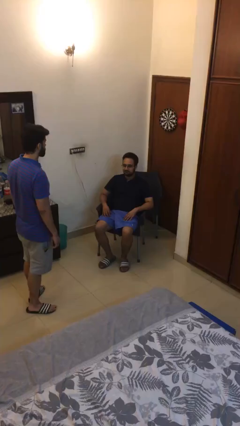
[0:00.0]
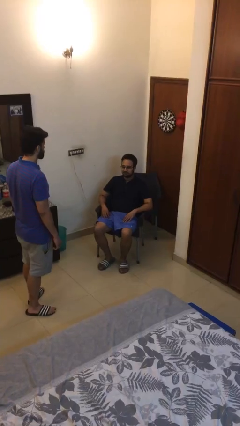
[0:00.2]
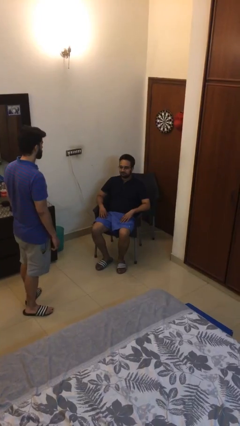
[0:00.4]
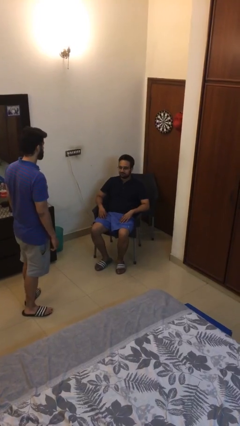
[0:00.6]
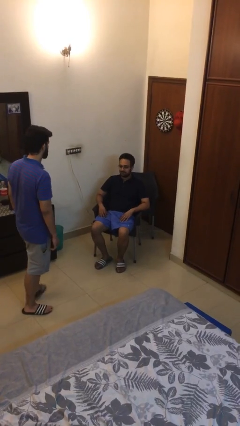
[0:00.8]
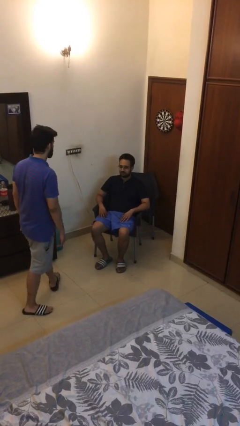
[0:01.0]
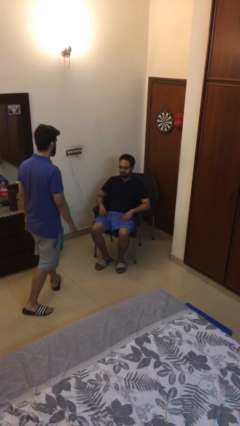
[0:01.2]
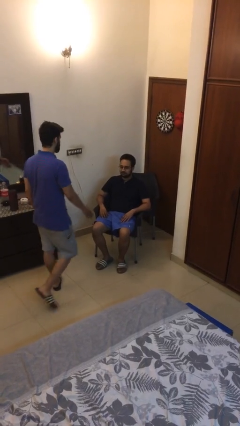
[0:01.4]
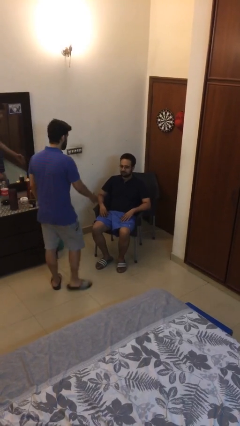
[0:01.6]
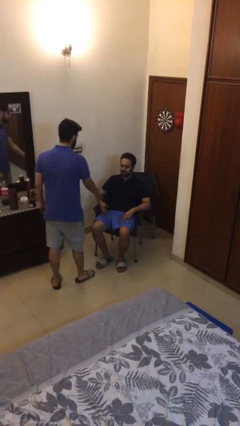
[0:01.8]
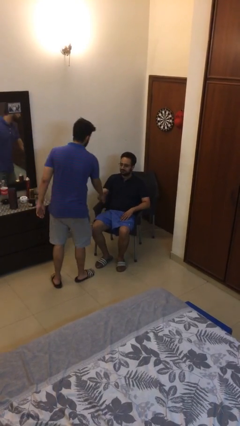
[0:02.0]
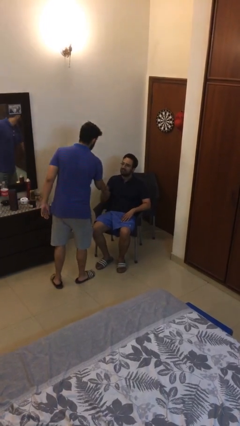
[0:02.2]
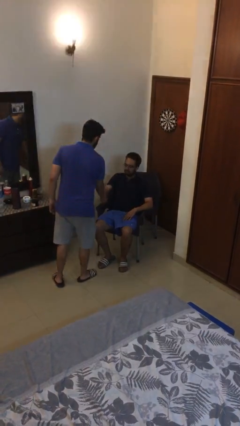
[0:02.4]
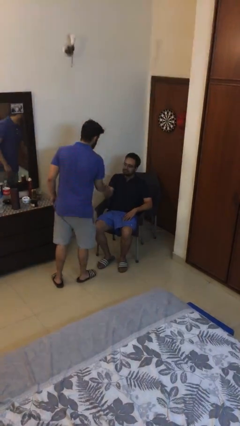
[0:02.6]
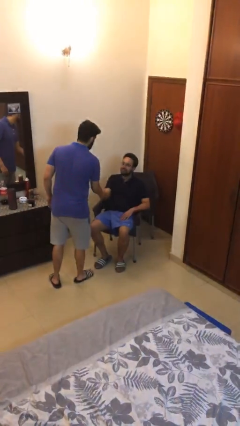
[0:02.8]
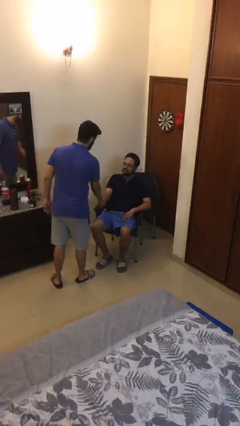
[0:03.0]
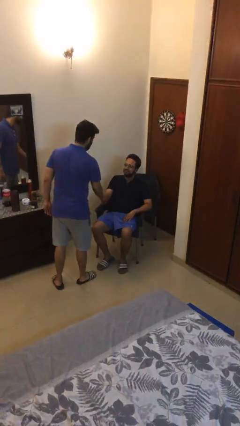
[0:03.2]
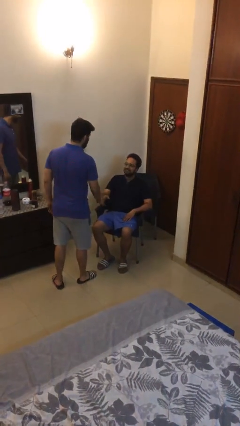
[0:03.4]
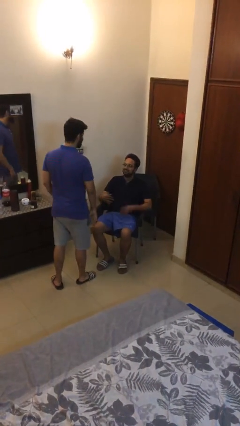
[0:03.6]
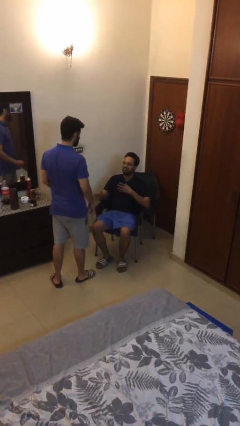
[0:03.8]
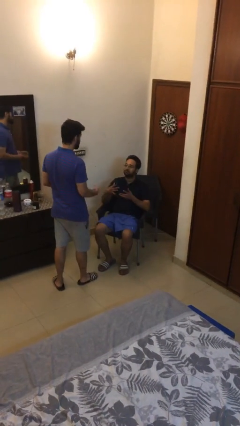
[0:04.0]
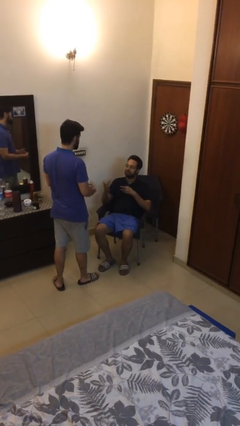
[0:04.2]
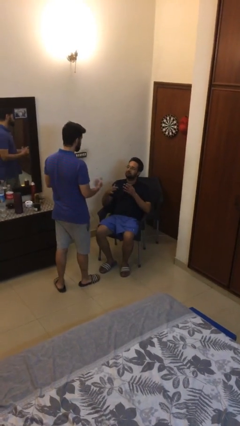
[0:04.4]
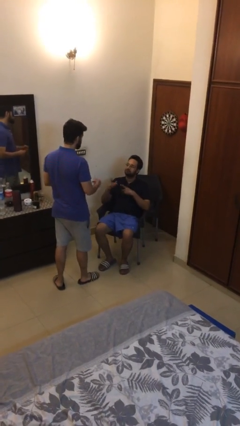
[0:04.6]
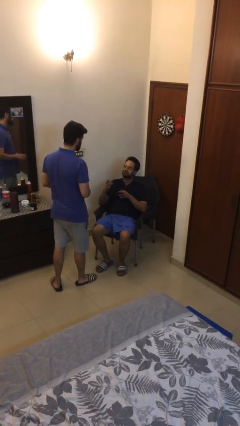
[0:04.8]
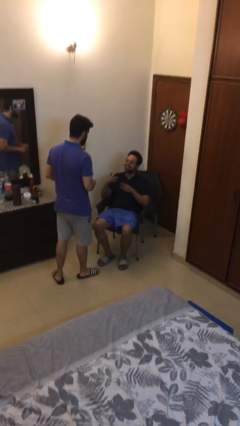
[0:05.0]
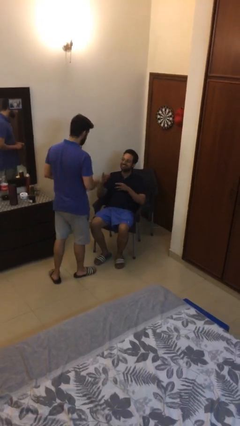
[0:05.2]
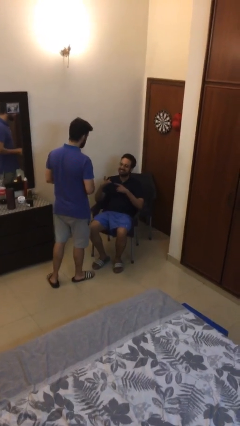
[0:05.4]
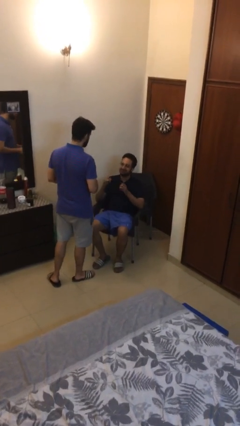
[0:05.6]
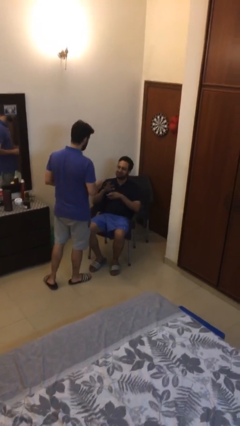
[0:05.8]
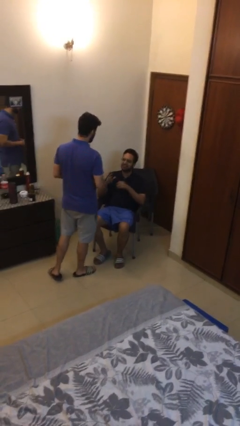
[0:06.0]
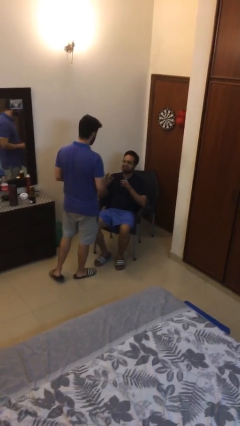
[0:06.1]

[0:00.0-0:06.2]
person shakes hand

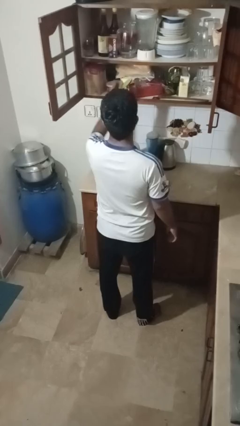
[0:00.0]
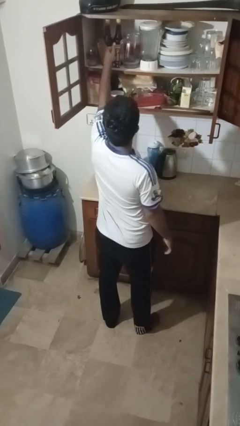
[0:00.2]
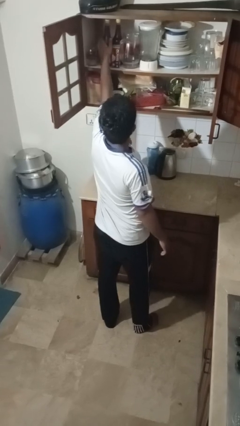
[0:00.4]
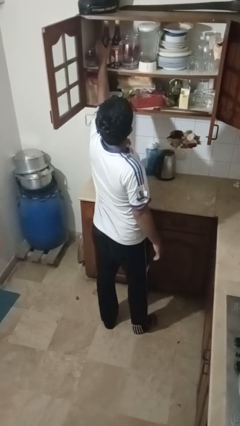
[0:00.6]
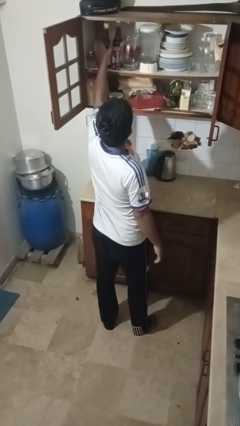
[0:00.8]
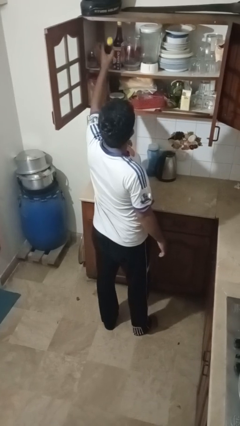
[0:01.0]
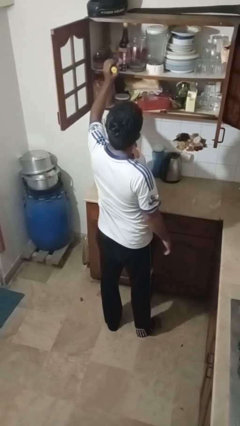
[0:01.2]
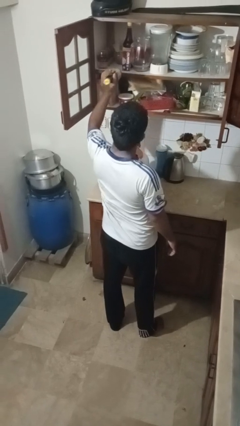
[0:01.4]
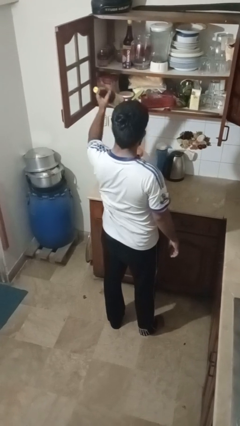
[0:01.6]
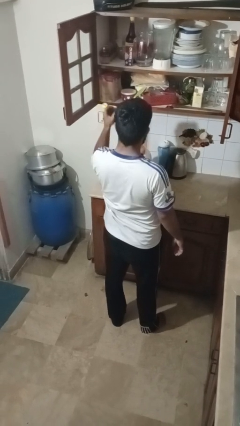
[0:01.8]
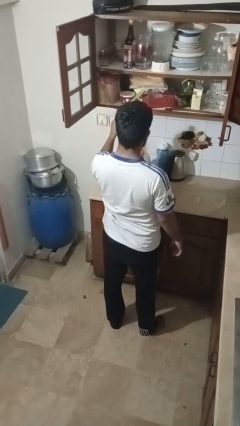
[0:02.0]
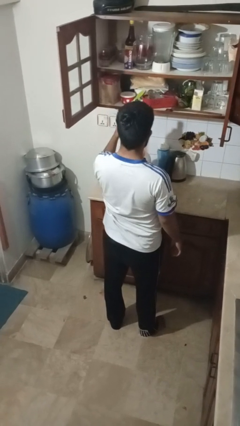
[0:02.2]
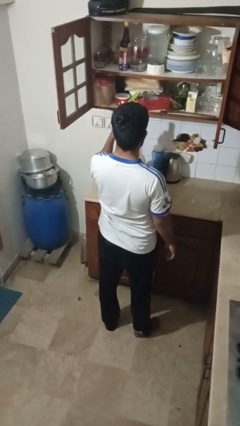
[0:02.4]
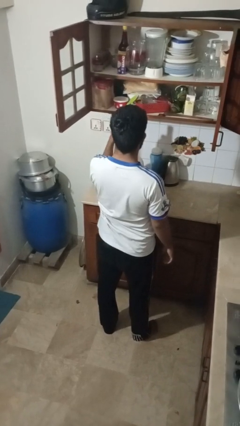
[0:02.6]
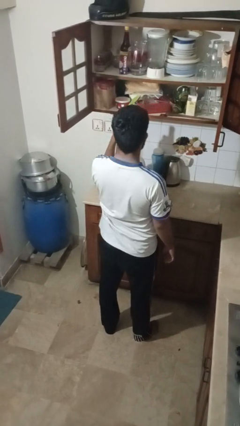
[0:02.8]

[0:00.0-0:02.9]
person takes object from cabinet

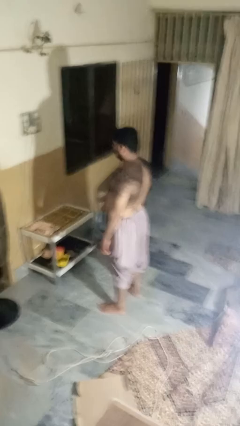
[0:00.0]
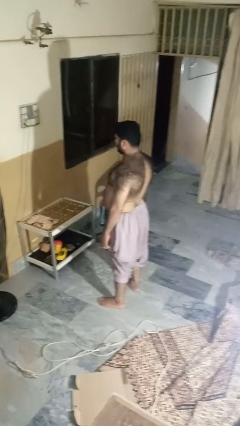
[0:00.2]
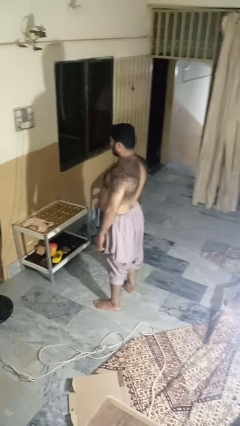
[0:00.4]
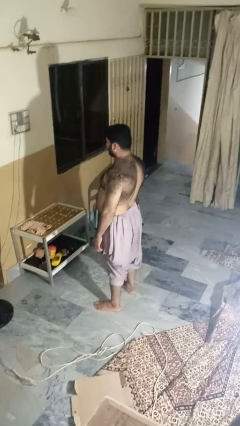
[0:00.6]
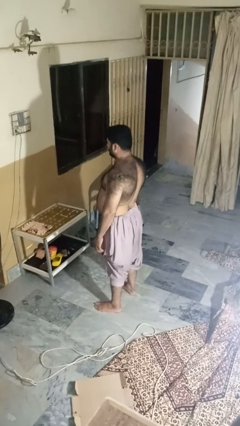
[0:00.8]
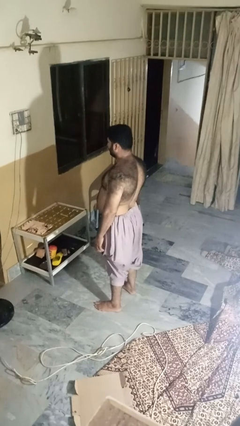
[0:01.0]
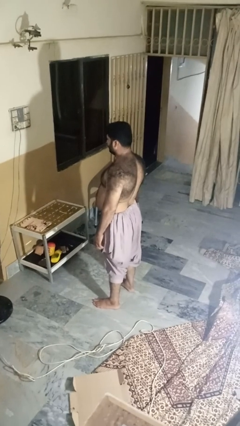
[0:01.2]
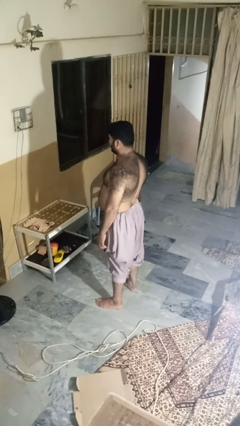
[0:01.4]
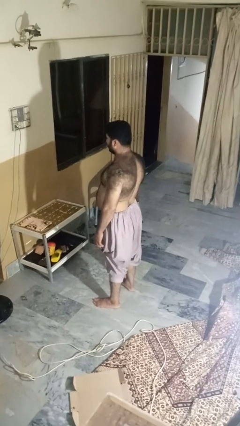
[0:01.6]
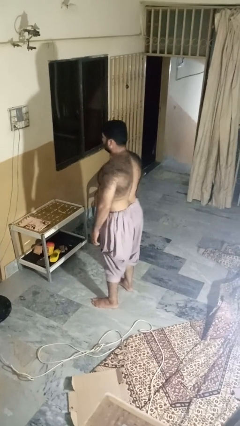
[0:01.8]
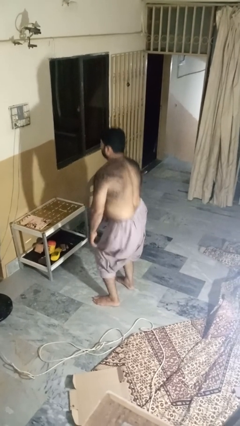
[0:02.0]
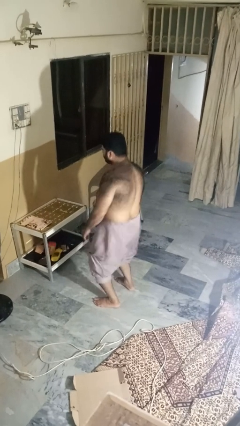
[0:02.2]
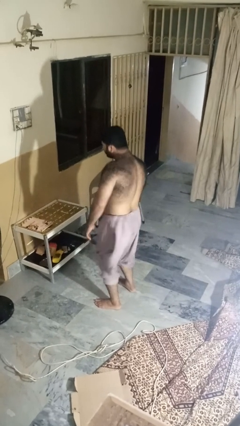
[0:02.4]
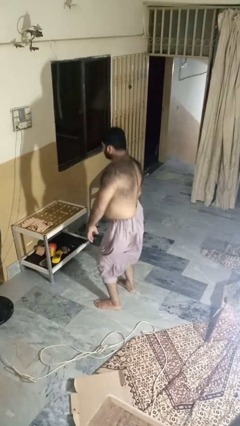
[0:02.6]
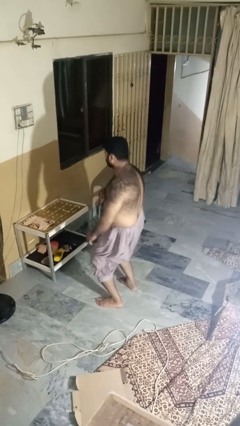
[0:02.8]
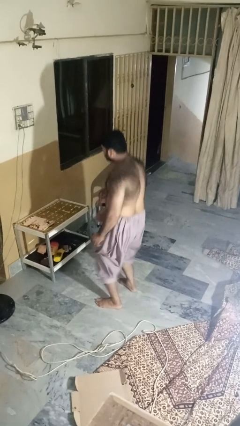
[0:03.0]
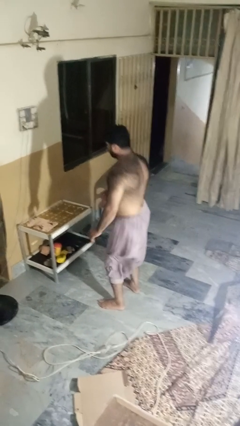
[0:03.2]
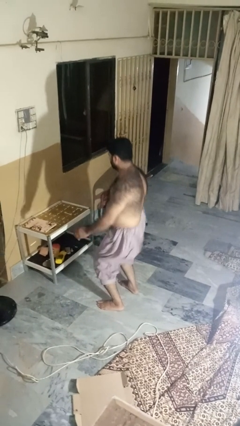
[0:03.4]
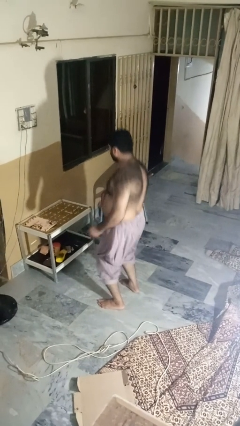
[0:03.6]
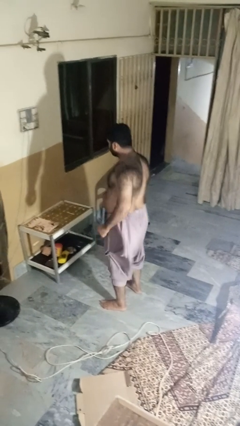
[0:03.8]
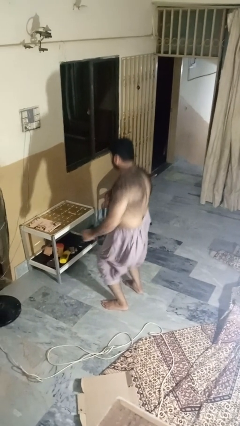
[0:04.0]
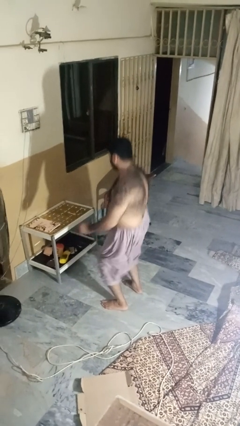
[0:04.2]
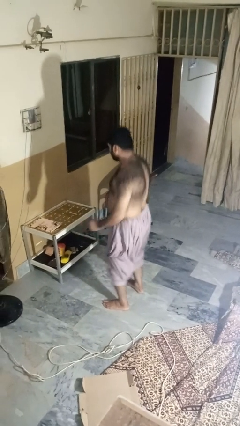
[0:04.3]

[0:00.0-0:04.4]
person dances in place

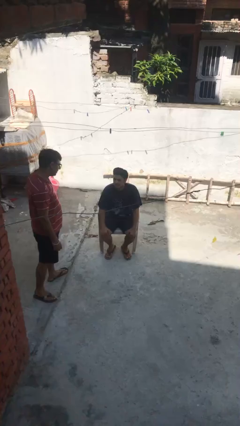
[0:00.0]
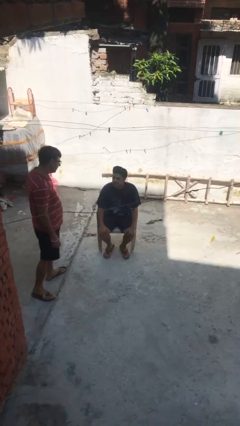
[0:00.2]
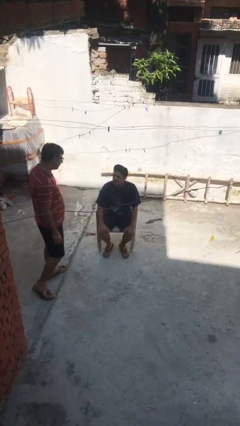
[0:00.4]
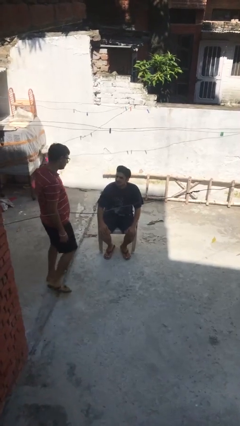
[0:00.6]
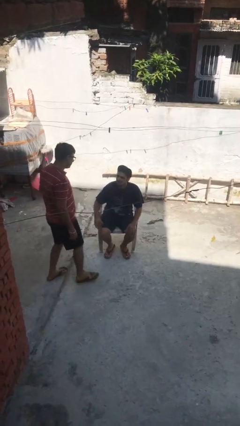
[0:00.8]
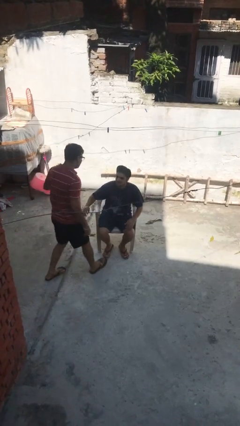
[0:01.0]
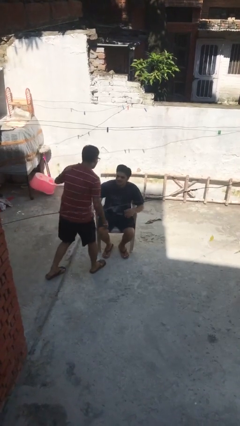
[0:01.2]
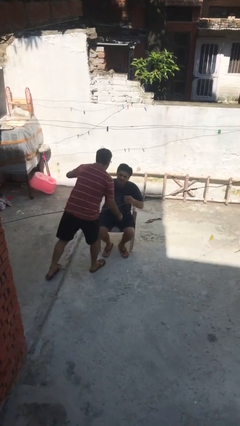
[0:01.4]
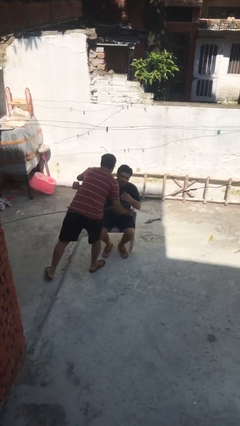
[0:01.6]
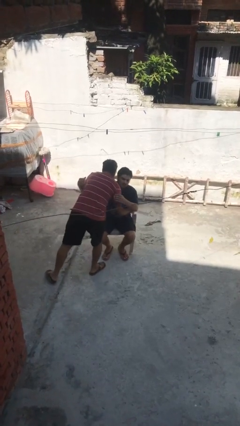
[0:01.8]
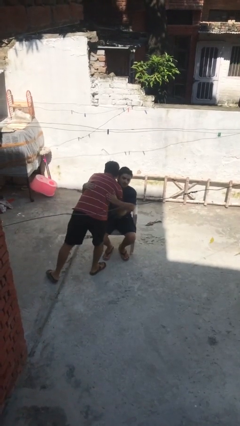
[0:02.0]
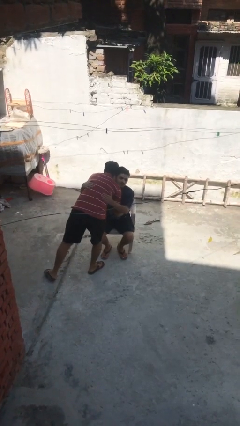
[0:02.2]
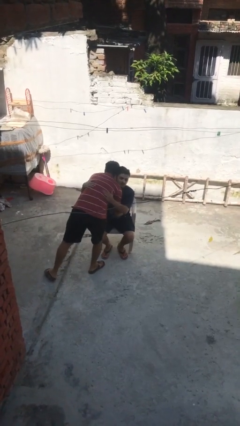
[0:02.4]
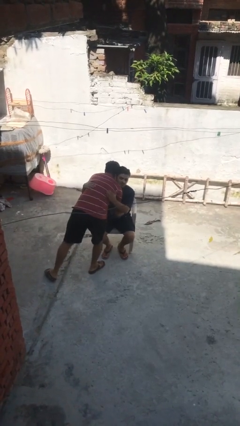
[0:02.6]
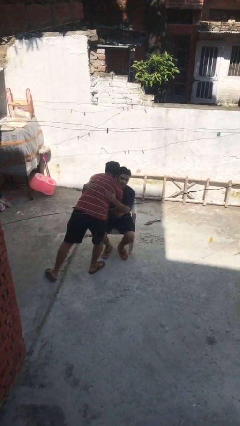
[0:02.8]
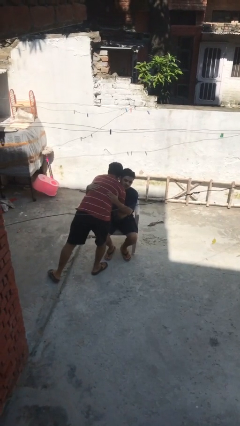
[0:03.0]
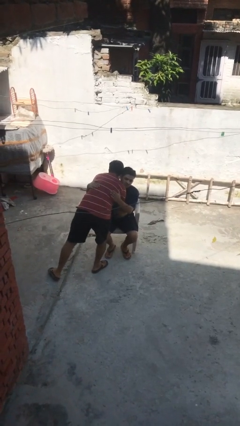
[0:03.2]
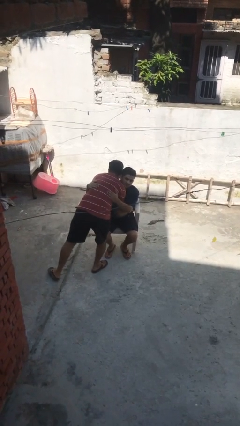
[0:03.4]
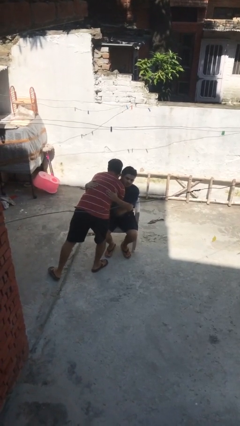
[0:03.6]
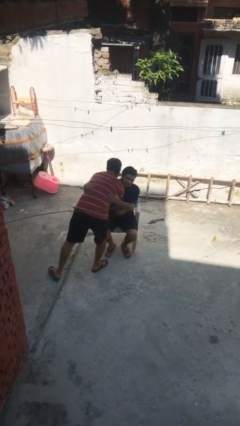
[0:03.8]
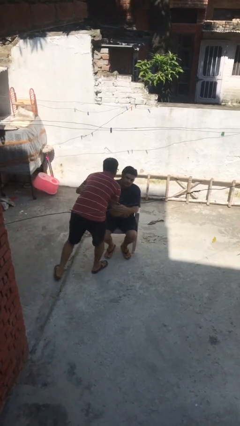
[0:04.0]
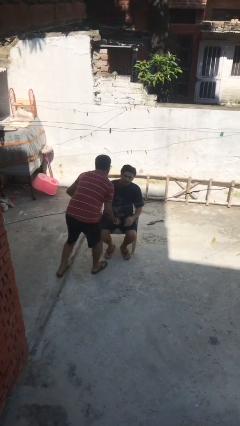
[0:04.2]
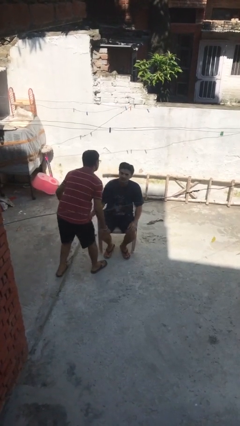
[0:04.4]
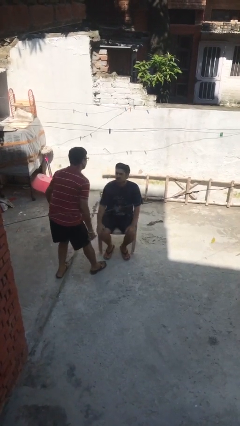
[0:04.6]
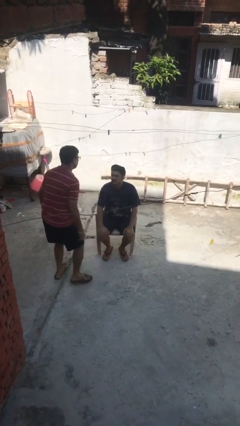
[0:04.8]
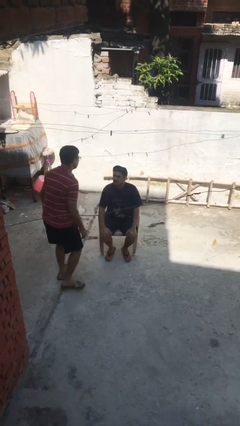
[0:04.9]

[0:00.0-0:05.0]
person embraces person
